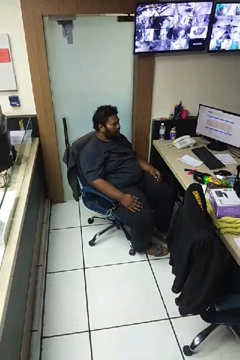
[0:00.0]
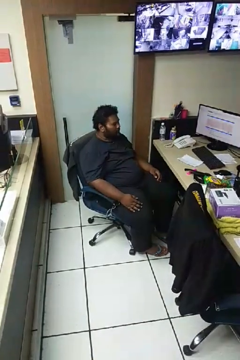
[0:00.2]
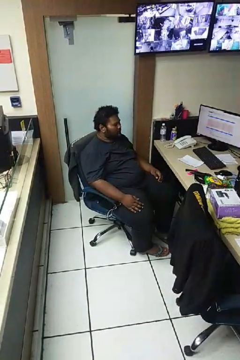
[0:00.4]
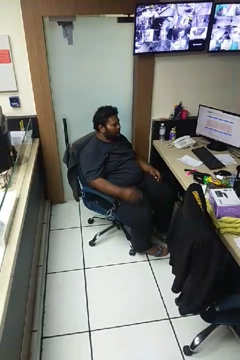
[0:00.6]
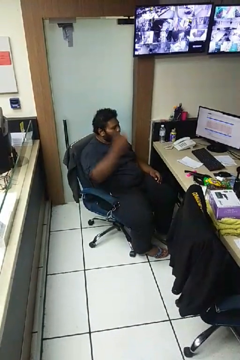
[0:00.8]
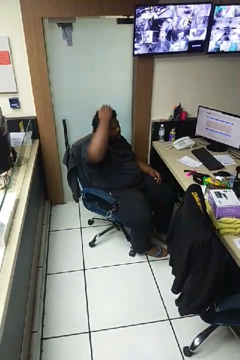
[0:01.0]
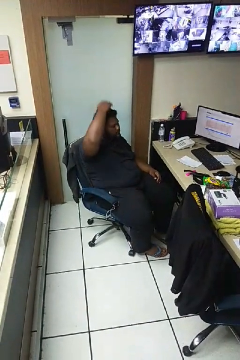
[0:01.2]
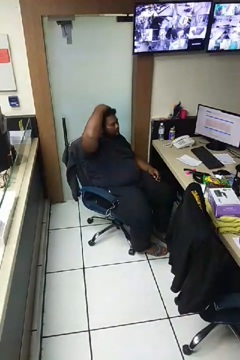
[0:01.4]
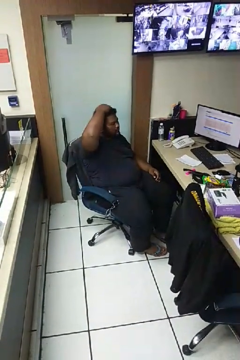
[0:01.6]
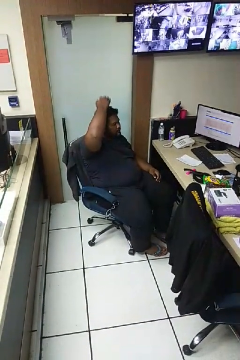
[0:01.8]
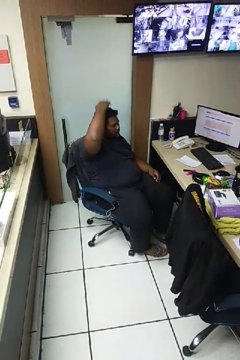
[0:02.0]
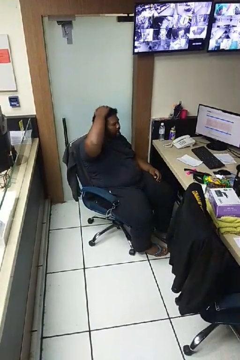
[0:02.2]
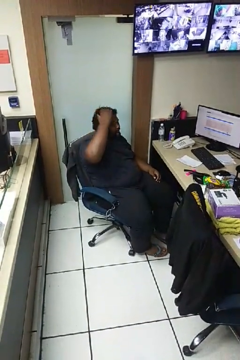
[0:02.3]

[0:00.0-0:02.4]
person pats head

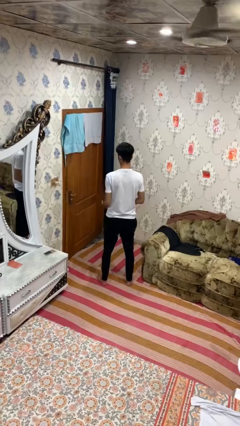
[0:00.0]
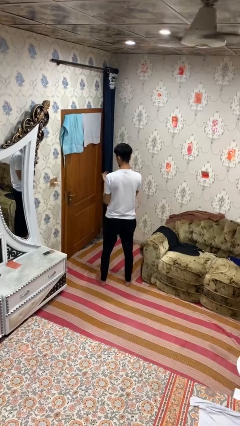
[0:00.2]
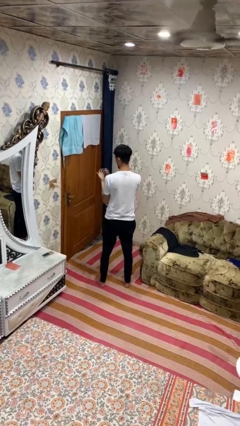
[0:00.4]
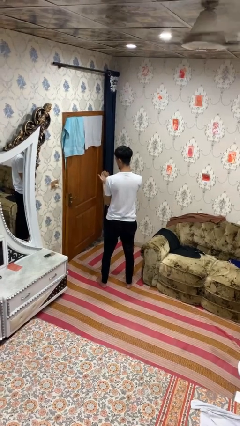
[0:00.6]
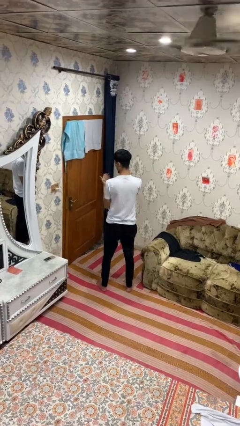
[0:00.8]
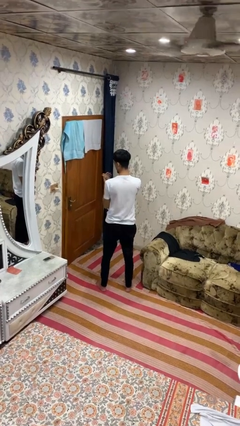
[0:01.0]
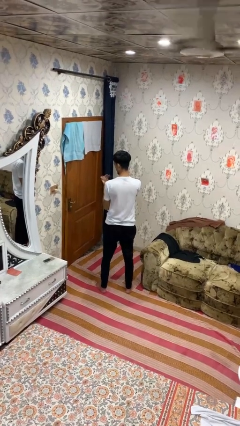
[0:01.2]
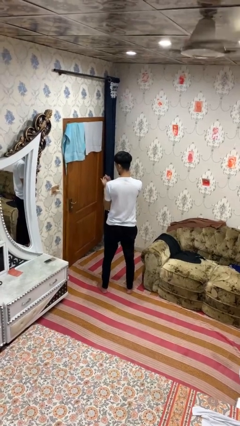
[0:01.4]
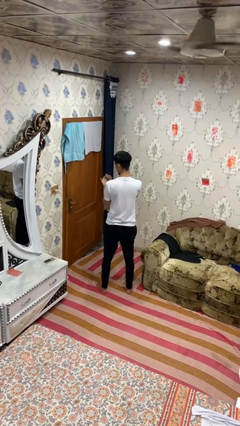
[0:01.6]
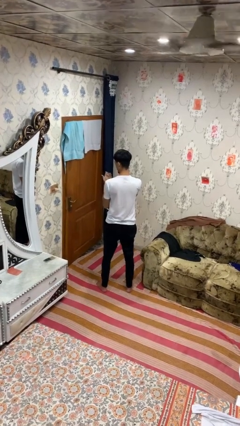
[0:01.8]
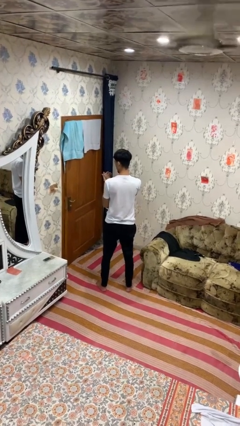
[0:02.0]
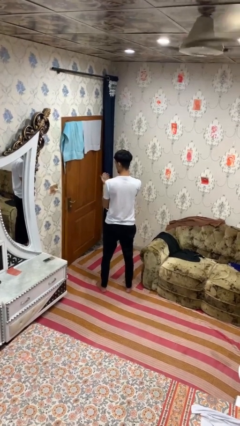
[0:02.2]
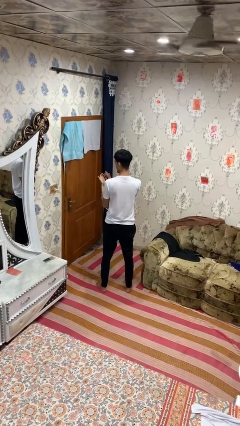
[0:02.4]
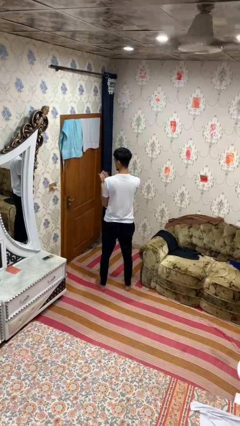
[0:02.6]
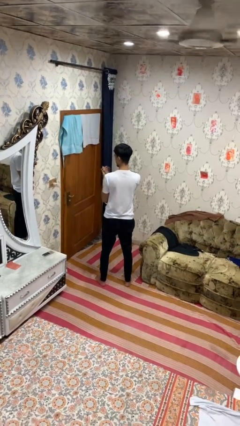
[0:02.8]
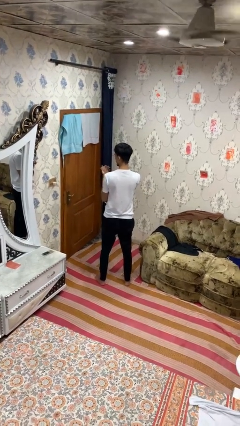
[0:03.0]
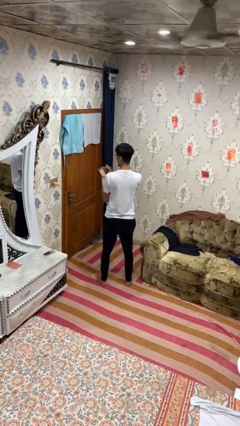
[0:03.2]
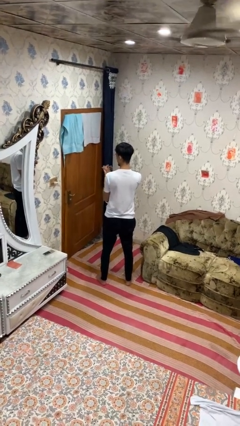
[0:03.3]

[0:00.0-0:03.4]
person claps hands

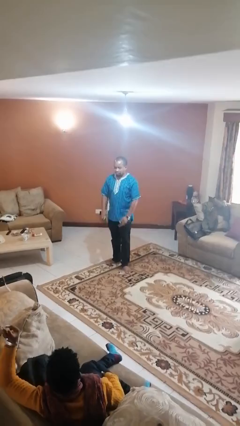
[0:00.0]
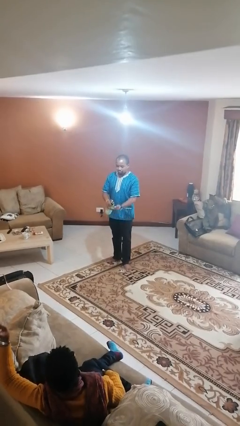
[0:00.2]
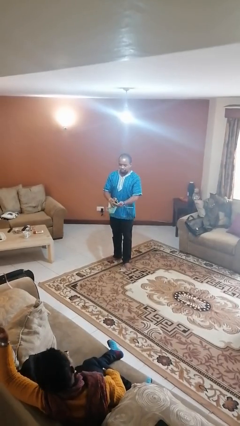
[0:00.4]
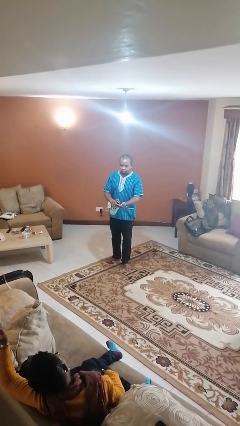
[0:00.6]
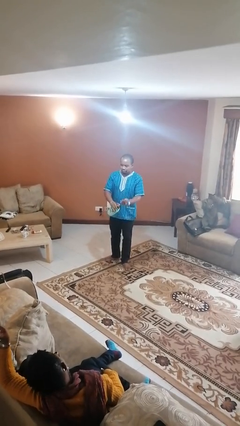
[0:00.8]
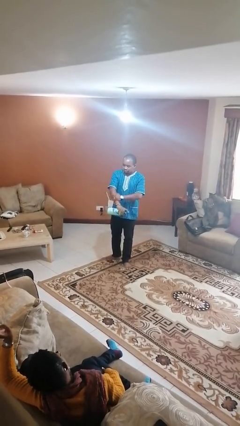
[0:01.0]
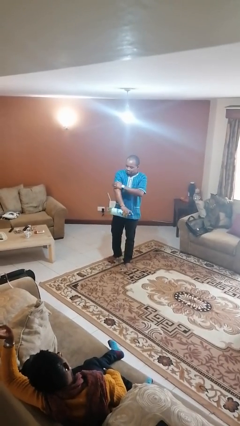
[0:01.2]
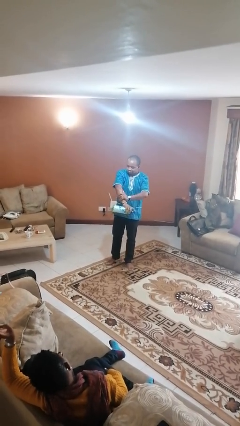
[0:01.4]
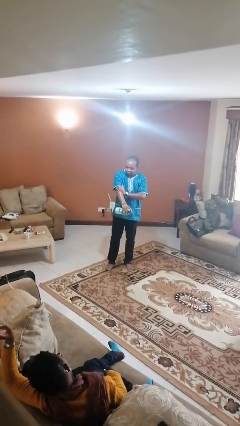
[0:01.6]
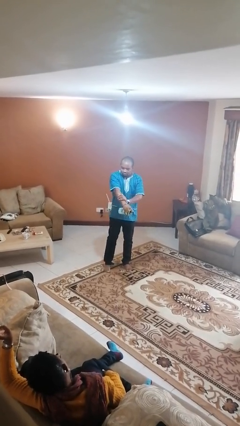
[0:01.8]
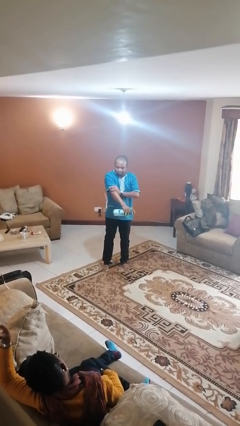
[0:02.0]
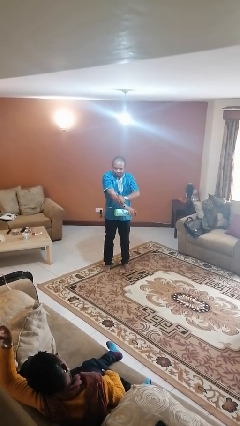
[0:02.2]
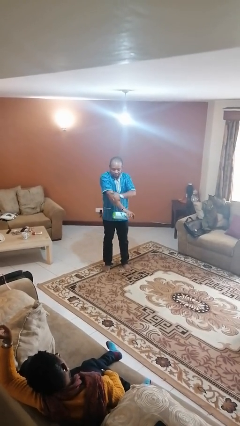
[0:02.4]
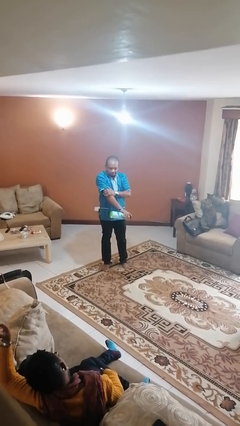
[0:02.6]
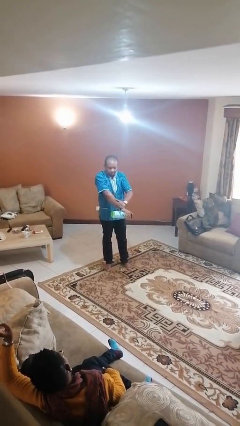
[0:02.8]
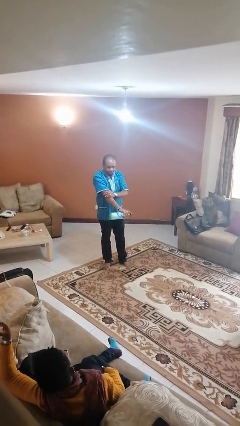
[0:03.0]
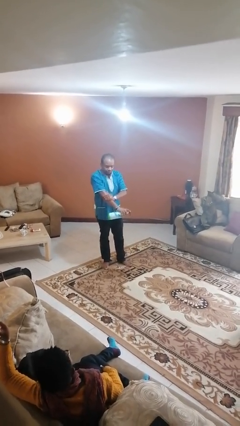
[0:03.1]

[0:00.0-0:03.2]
person applies sunscreen

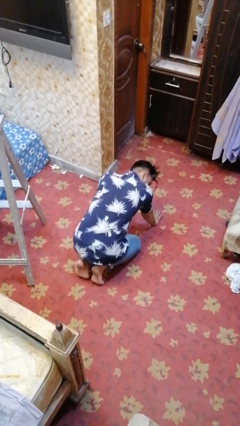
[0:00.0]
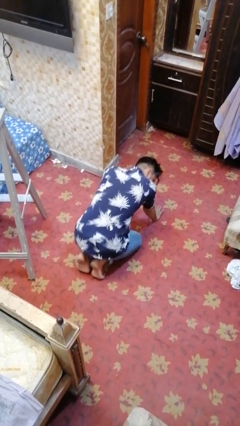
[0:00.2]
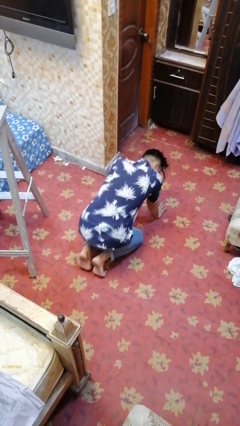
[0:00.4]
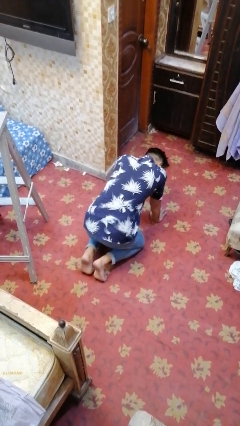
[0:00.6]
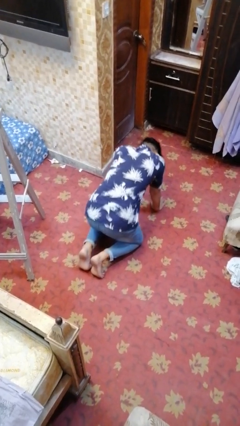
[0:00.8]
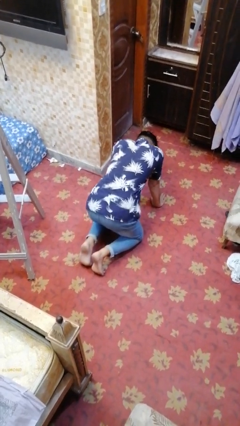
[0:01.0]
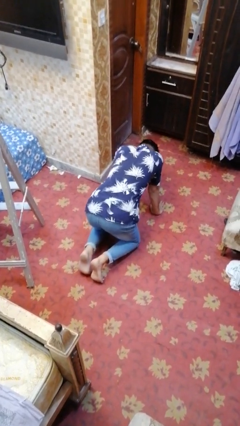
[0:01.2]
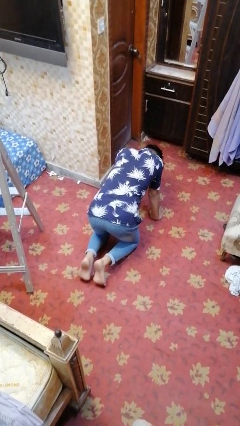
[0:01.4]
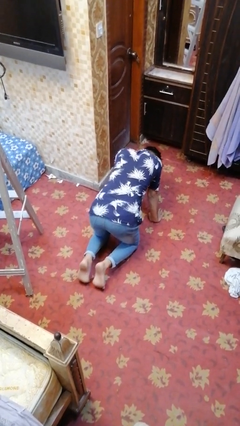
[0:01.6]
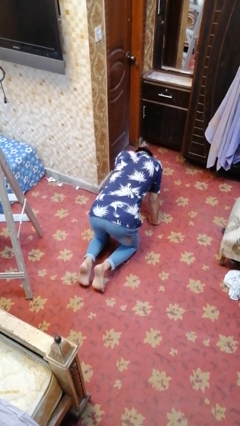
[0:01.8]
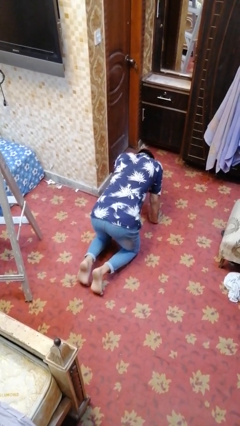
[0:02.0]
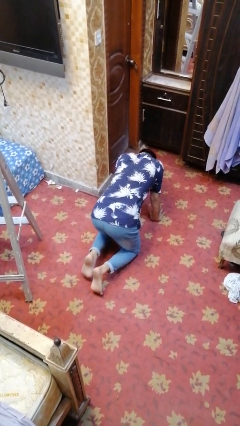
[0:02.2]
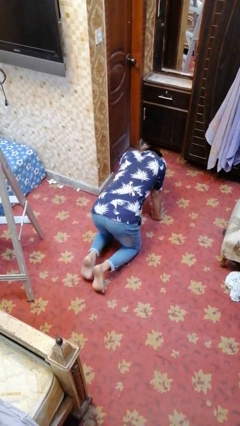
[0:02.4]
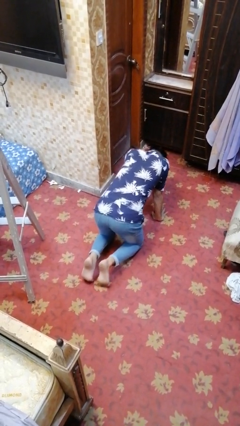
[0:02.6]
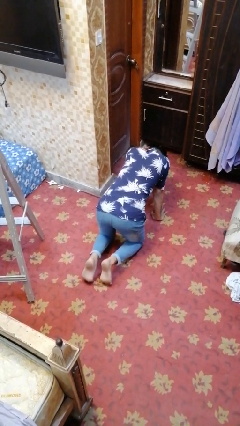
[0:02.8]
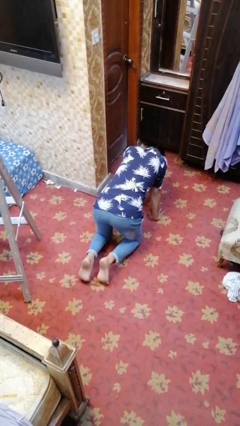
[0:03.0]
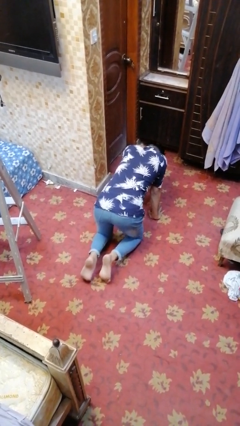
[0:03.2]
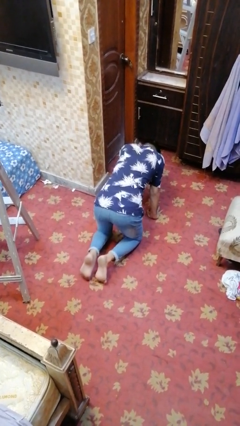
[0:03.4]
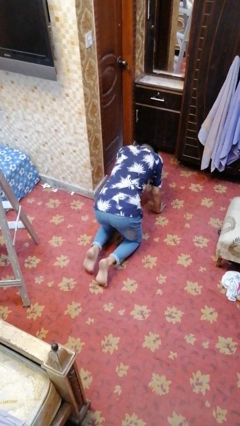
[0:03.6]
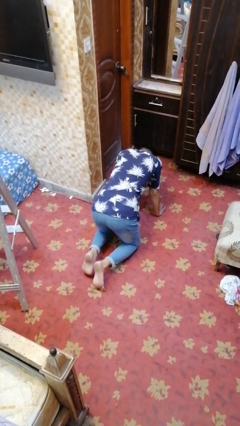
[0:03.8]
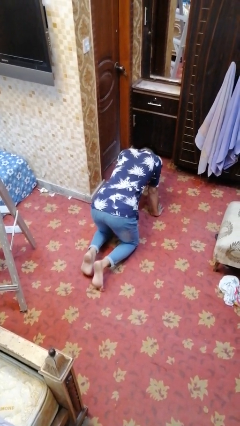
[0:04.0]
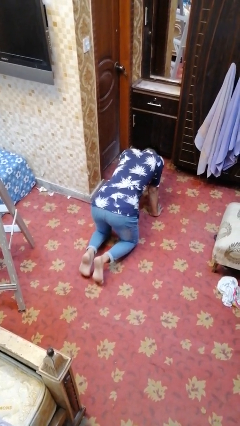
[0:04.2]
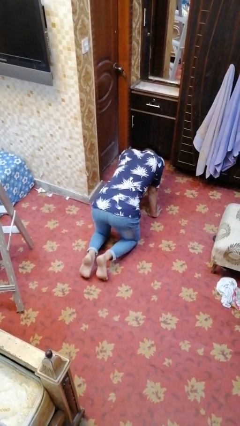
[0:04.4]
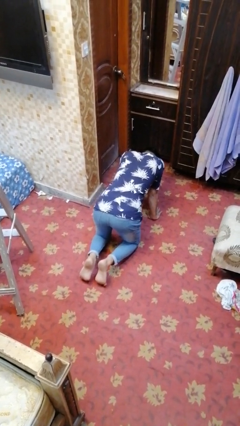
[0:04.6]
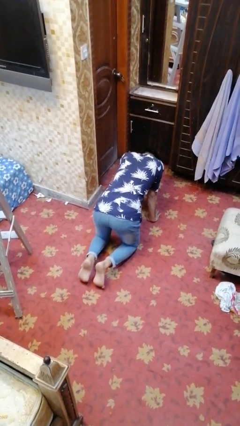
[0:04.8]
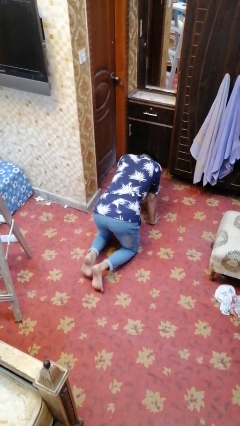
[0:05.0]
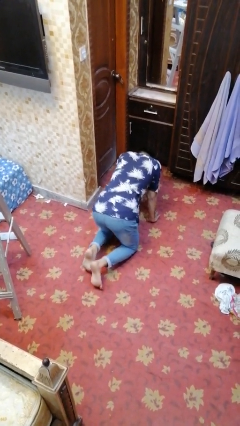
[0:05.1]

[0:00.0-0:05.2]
person crawls

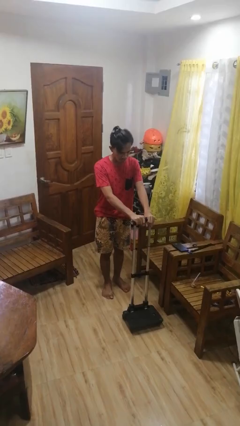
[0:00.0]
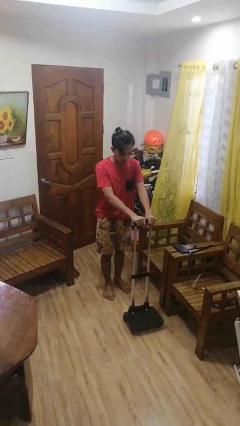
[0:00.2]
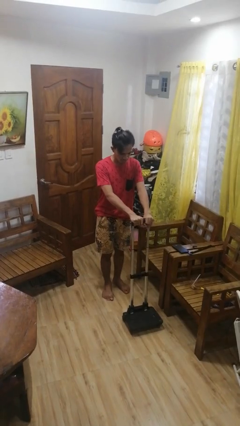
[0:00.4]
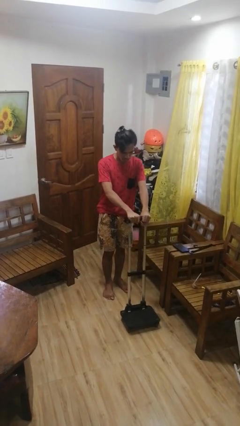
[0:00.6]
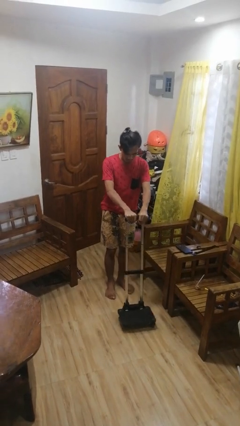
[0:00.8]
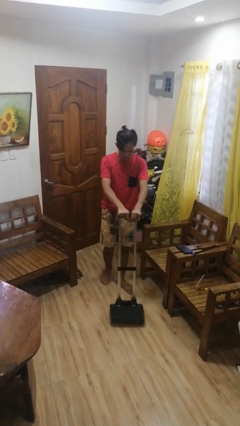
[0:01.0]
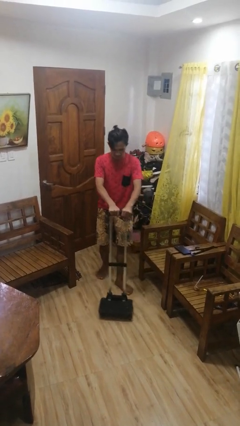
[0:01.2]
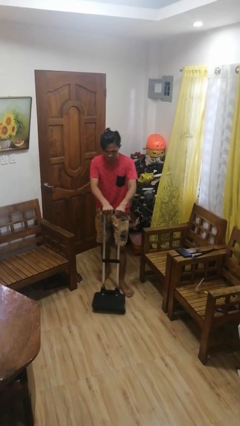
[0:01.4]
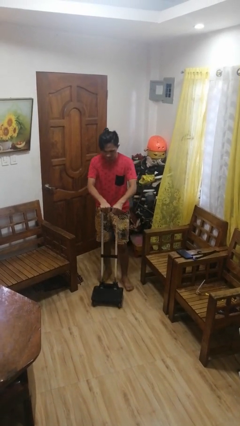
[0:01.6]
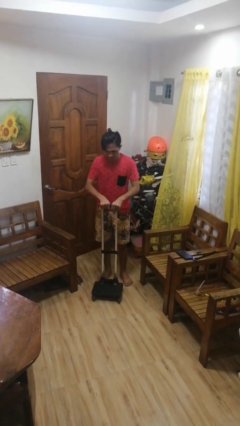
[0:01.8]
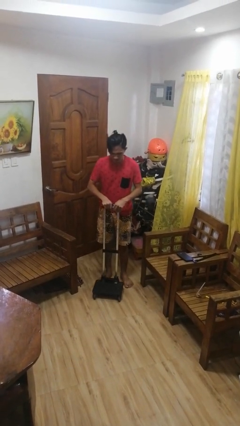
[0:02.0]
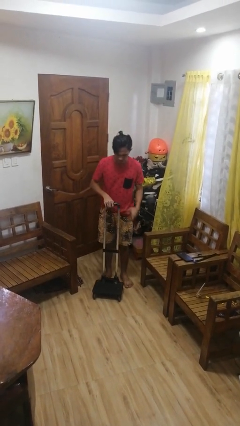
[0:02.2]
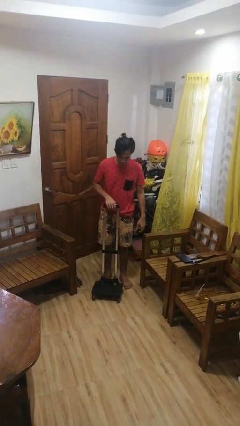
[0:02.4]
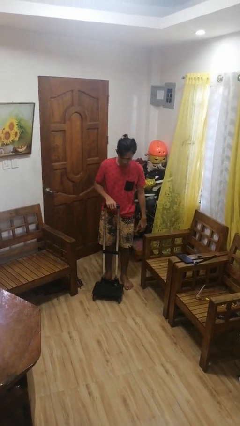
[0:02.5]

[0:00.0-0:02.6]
person pulls wheeled cart

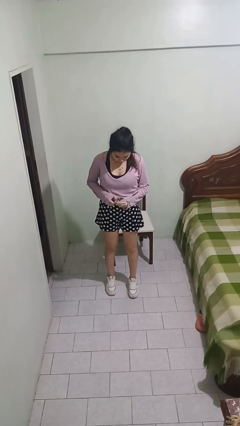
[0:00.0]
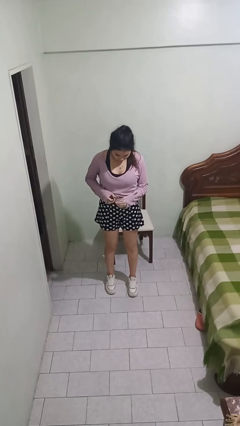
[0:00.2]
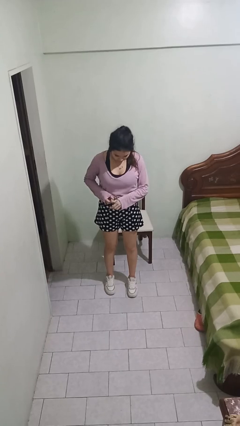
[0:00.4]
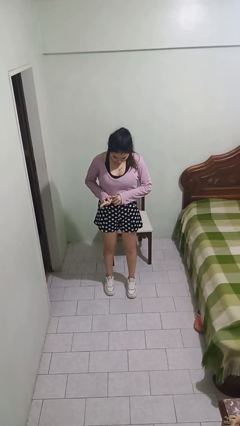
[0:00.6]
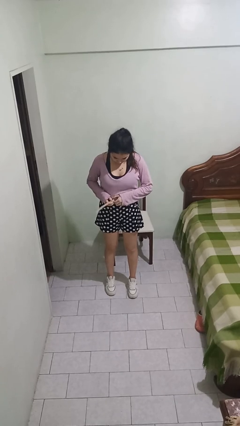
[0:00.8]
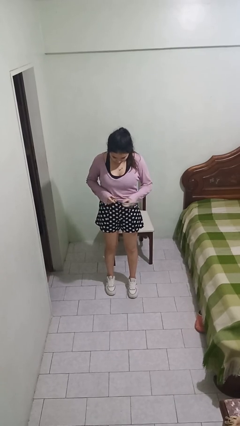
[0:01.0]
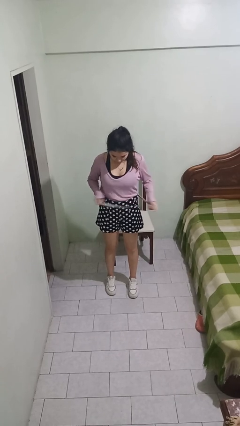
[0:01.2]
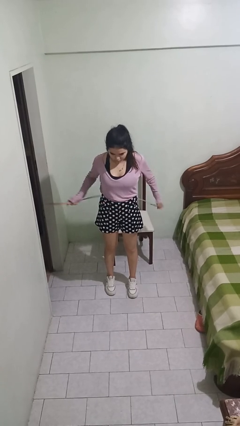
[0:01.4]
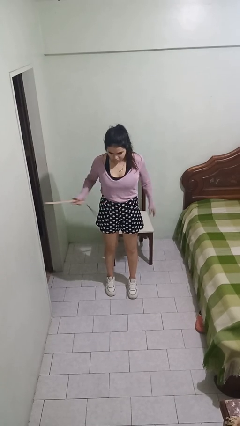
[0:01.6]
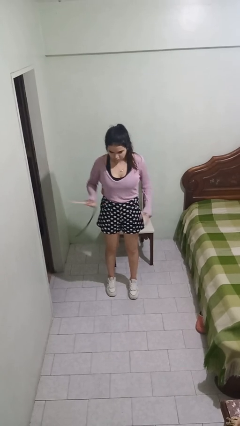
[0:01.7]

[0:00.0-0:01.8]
person takes off belt
